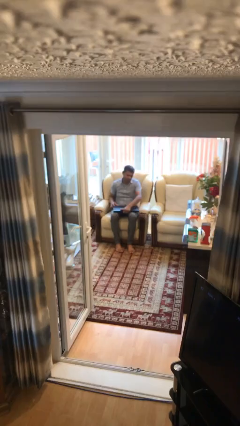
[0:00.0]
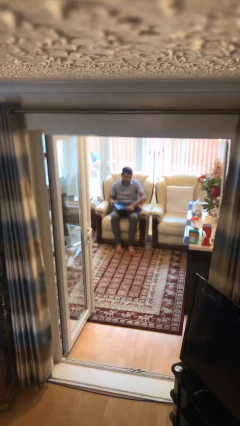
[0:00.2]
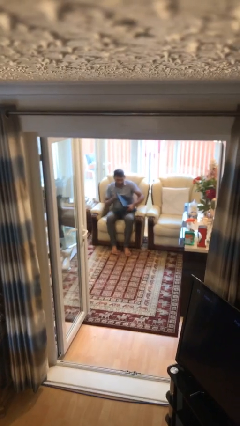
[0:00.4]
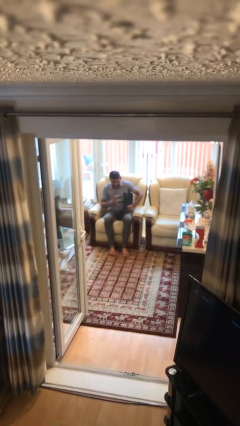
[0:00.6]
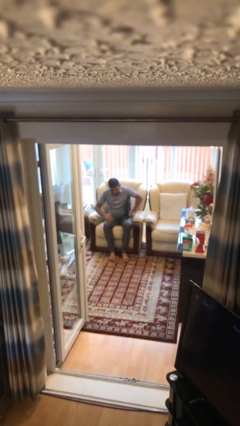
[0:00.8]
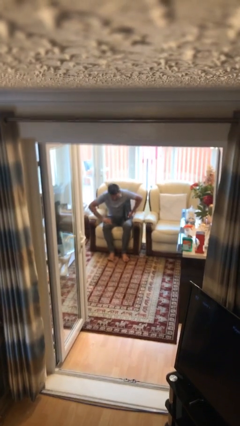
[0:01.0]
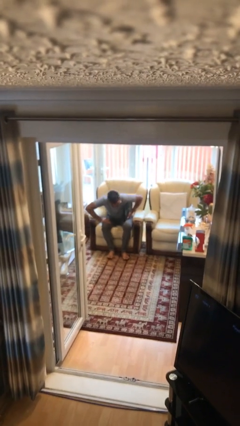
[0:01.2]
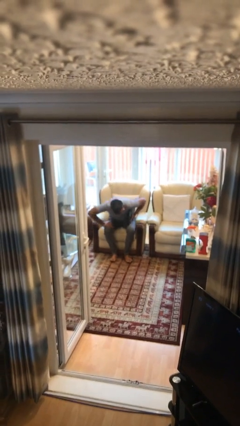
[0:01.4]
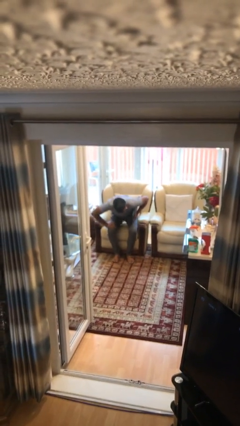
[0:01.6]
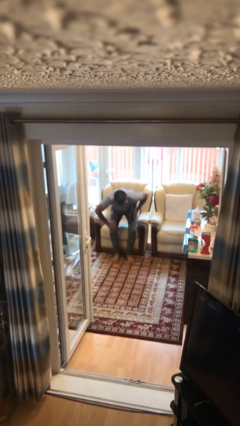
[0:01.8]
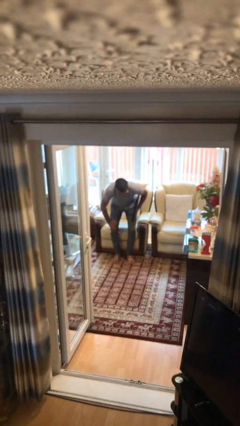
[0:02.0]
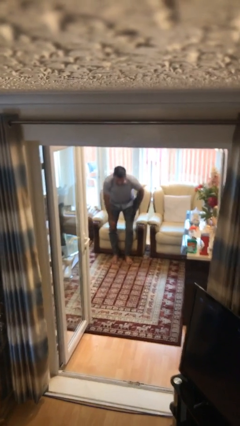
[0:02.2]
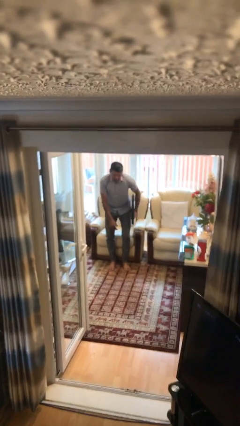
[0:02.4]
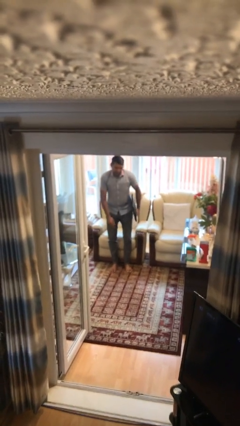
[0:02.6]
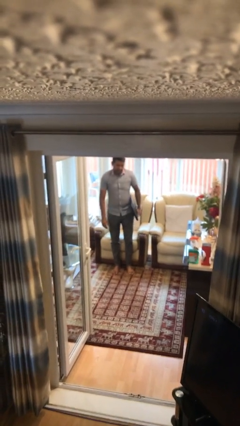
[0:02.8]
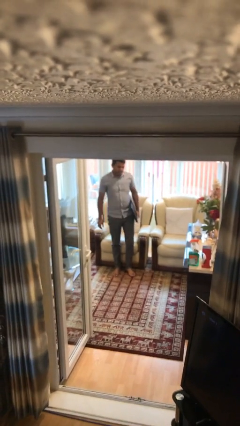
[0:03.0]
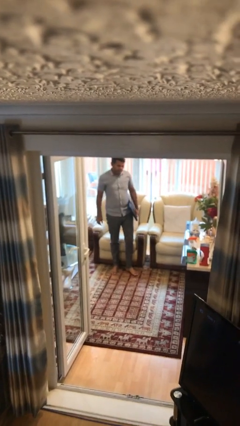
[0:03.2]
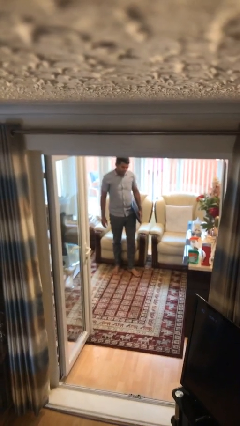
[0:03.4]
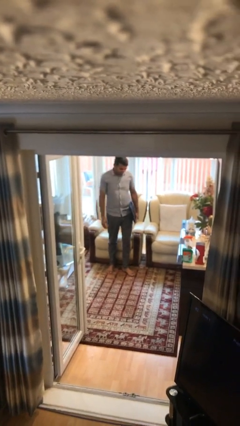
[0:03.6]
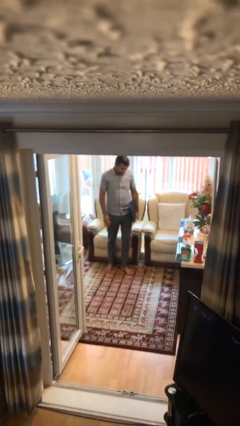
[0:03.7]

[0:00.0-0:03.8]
person stands up

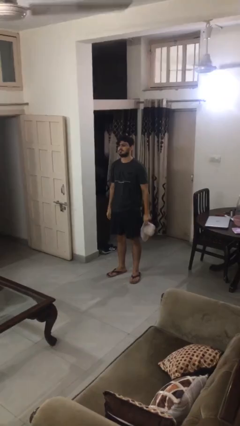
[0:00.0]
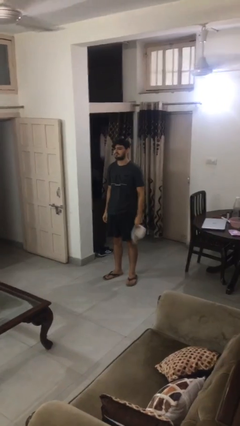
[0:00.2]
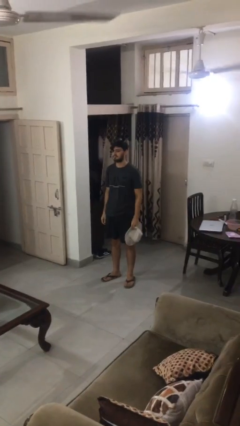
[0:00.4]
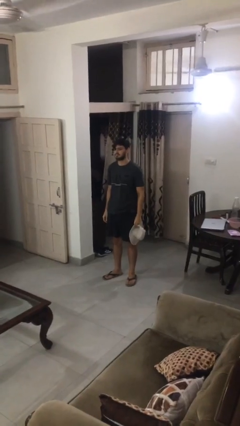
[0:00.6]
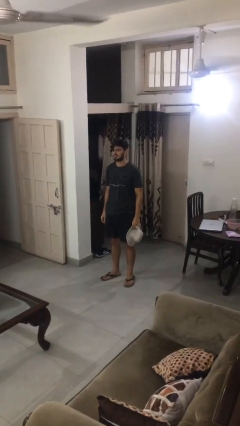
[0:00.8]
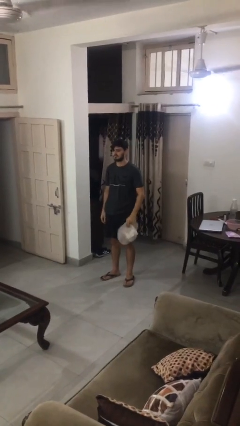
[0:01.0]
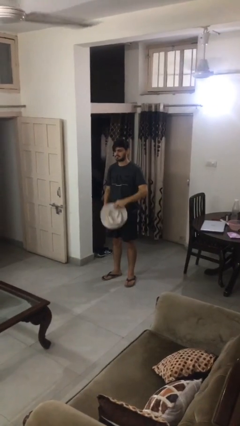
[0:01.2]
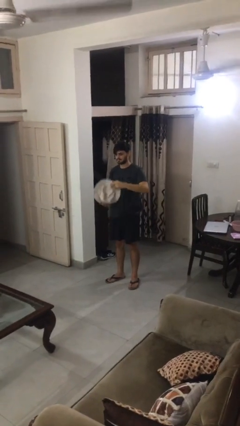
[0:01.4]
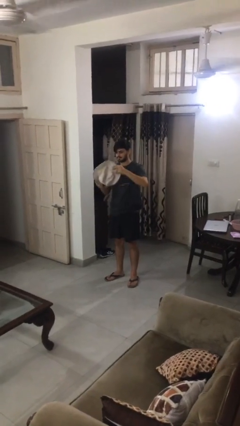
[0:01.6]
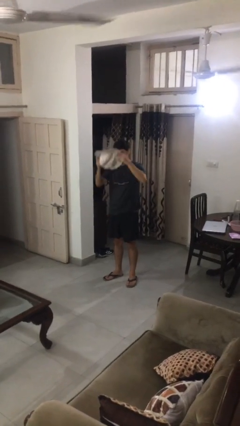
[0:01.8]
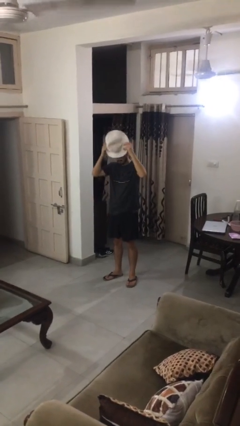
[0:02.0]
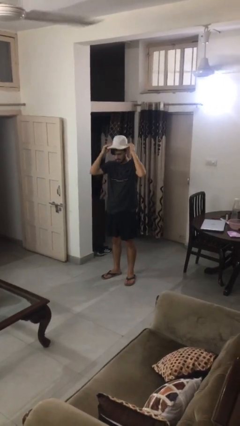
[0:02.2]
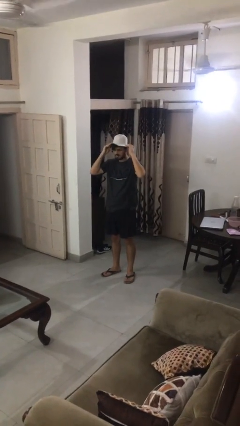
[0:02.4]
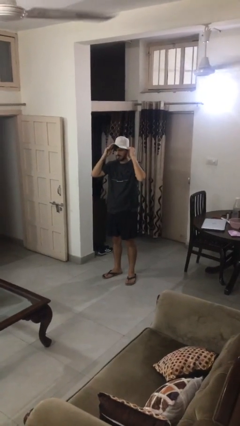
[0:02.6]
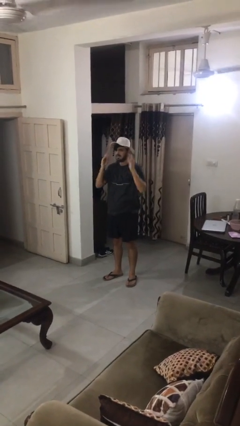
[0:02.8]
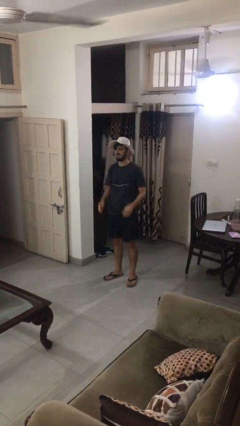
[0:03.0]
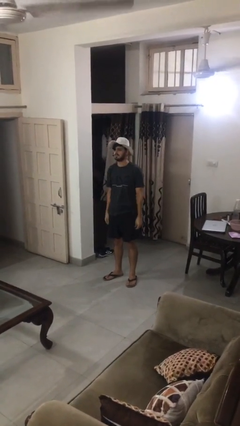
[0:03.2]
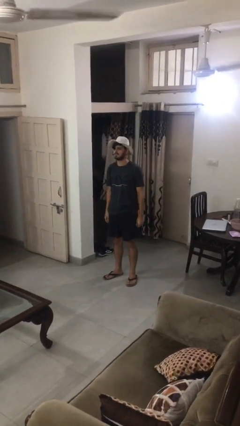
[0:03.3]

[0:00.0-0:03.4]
person puts on hat

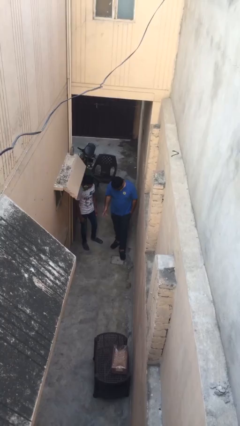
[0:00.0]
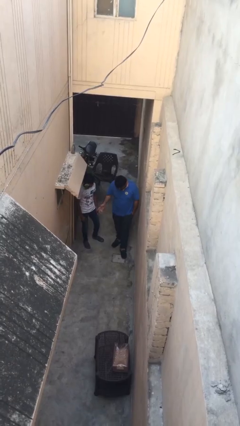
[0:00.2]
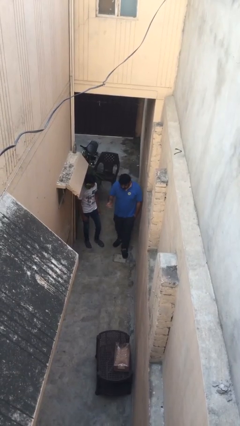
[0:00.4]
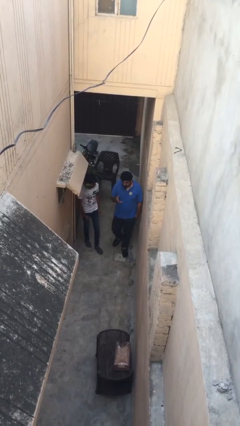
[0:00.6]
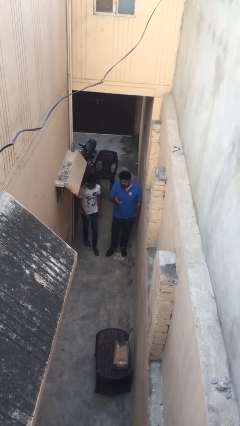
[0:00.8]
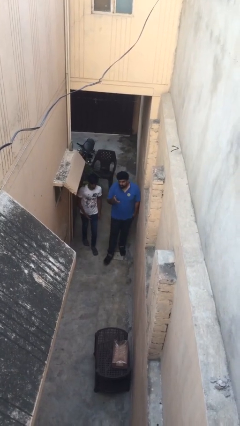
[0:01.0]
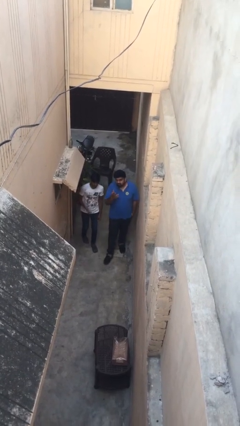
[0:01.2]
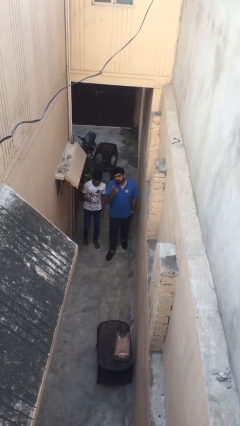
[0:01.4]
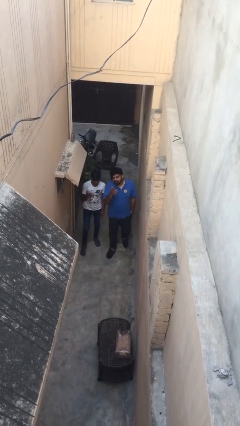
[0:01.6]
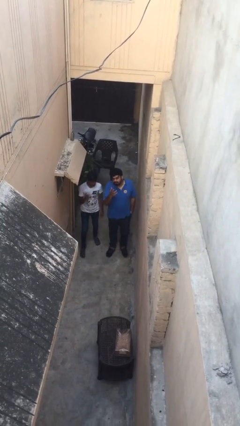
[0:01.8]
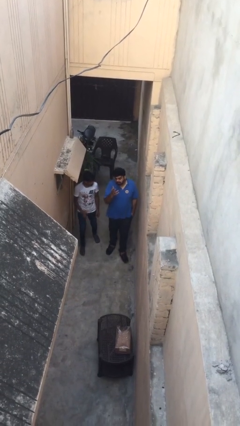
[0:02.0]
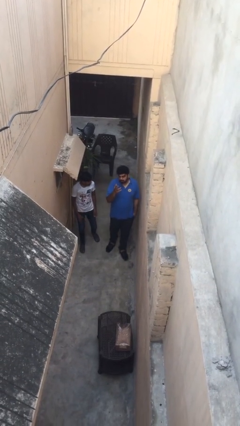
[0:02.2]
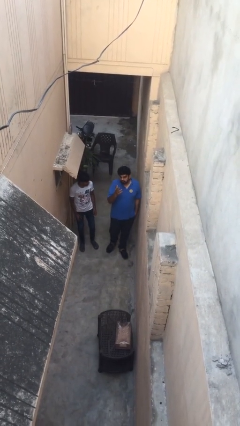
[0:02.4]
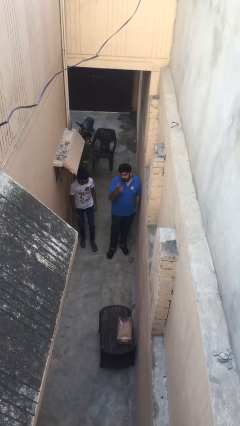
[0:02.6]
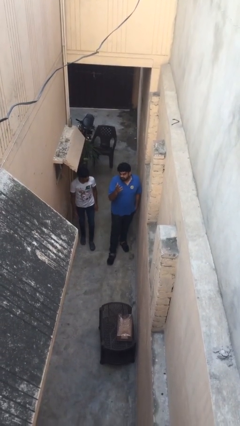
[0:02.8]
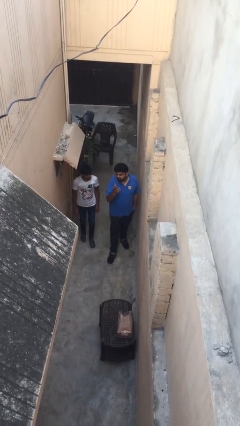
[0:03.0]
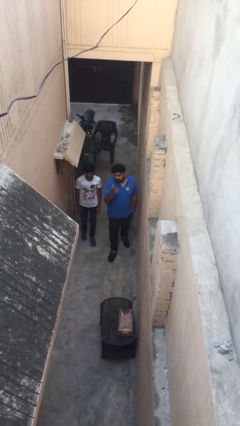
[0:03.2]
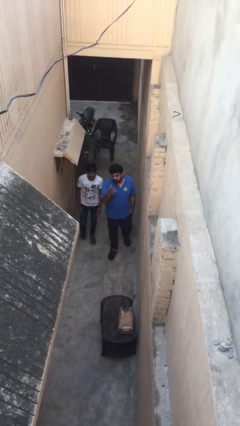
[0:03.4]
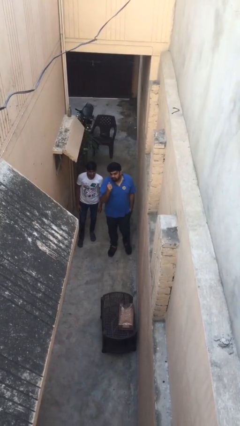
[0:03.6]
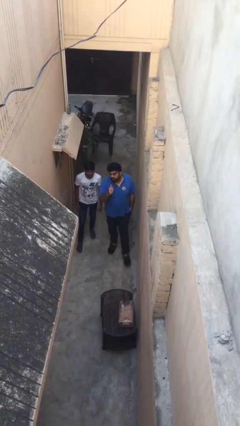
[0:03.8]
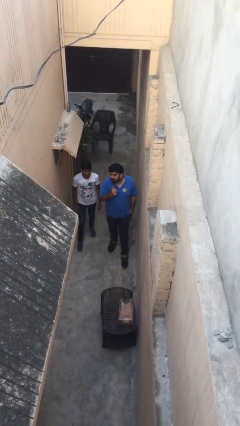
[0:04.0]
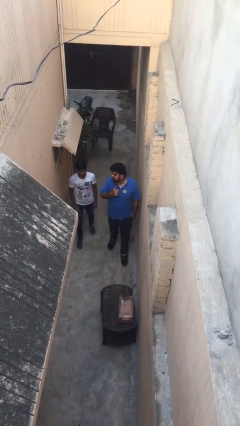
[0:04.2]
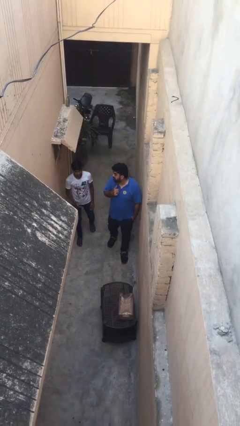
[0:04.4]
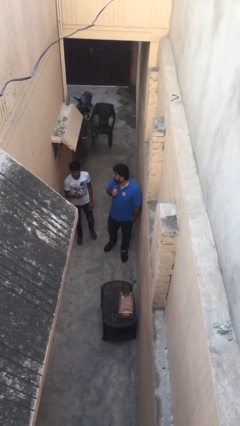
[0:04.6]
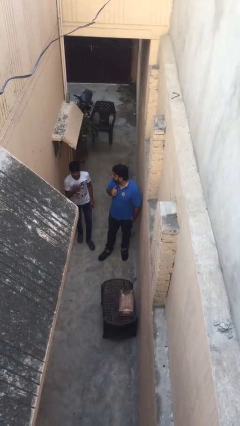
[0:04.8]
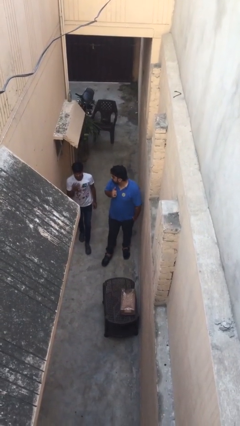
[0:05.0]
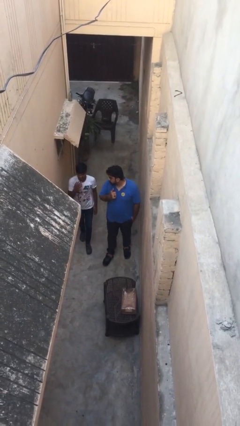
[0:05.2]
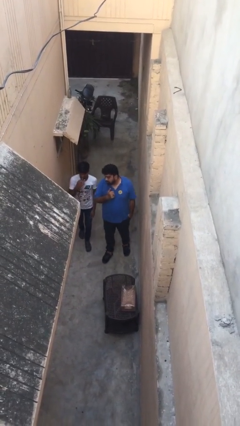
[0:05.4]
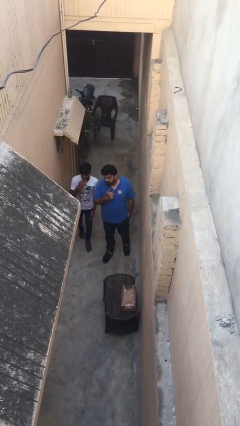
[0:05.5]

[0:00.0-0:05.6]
person talks to person

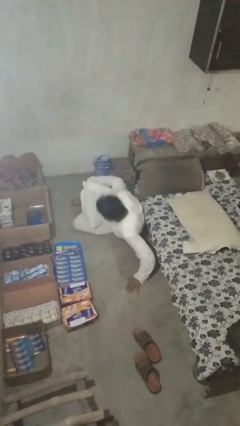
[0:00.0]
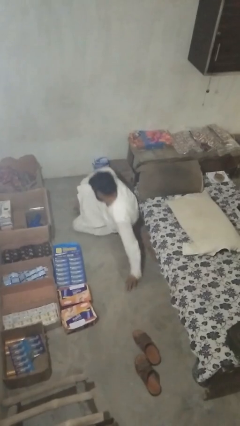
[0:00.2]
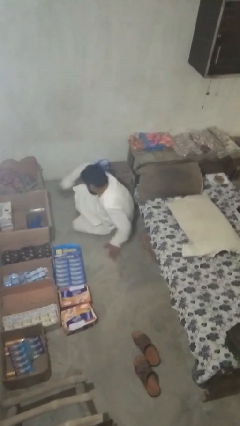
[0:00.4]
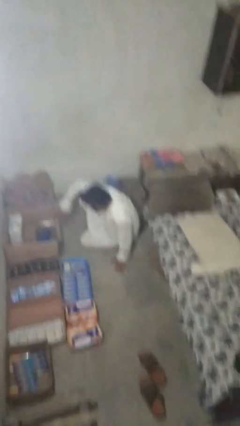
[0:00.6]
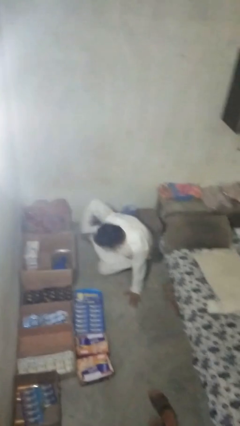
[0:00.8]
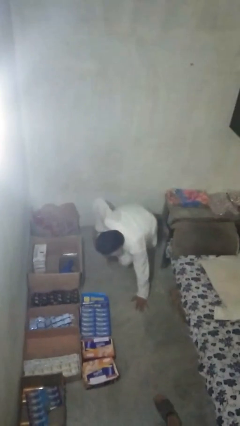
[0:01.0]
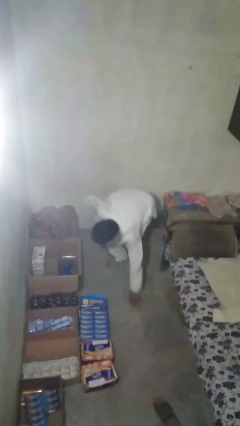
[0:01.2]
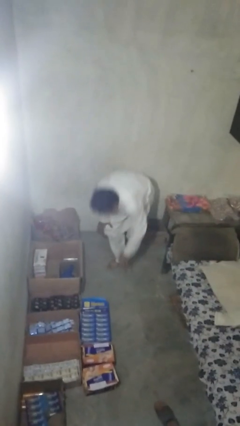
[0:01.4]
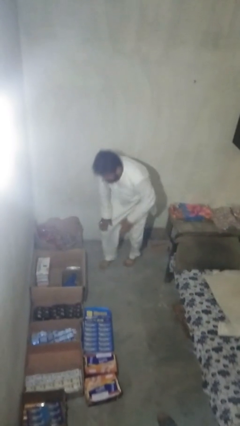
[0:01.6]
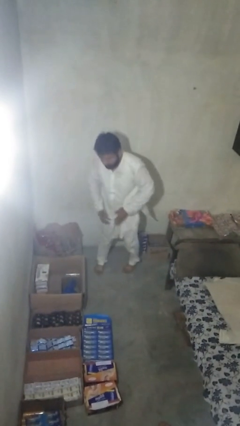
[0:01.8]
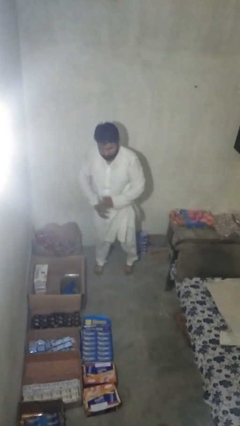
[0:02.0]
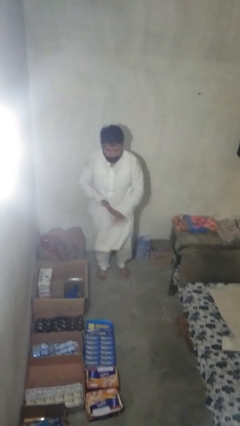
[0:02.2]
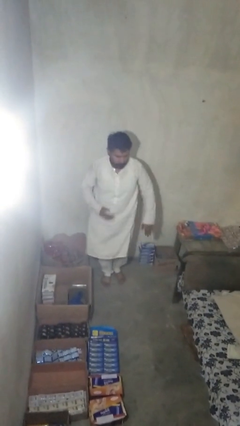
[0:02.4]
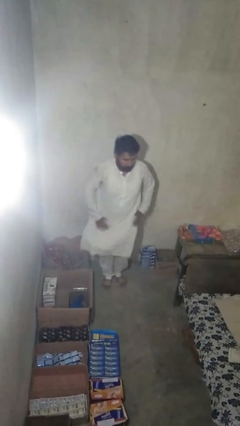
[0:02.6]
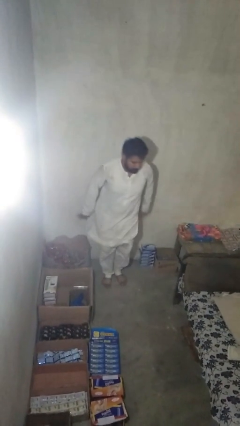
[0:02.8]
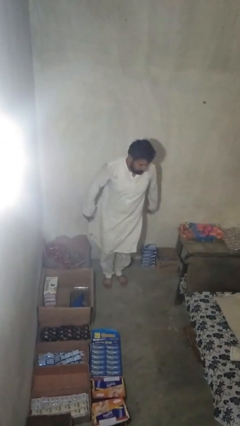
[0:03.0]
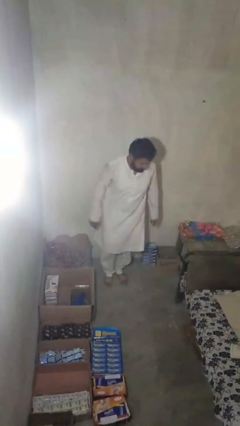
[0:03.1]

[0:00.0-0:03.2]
person stands up from floor

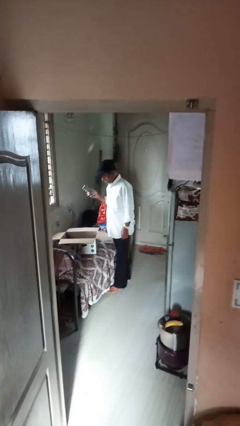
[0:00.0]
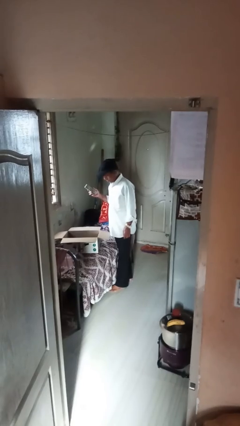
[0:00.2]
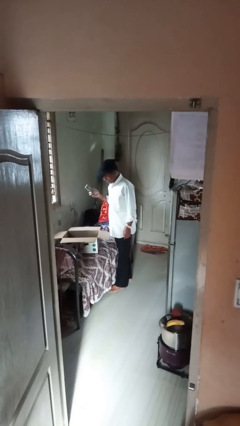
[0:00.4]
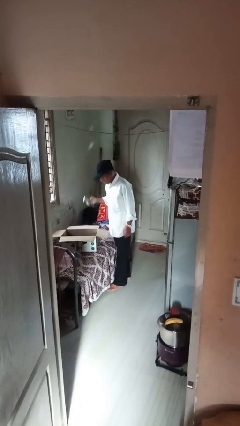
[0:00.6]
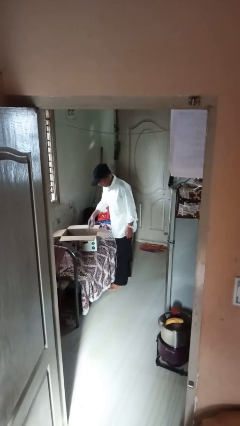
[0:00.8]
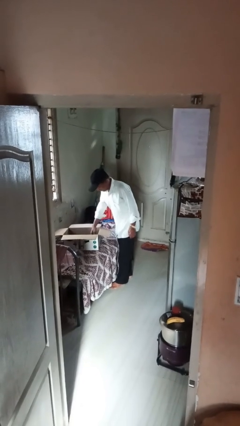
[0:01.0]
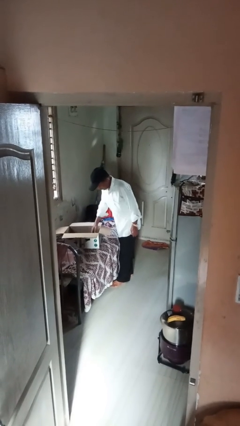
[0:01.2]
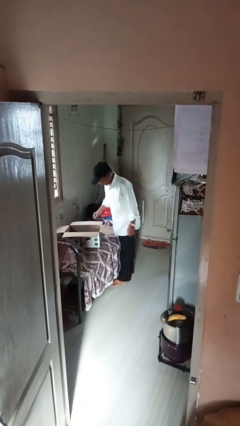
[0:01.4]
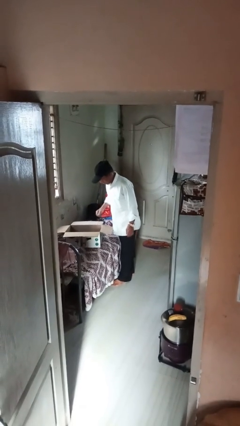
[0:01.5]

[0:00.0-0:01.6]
person puts object into box
